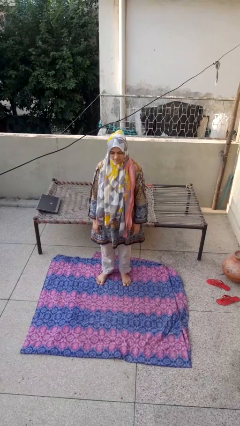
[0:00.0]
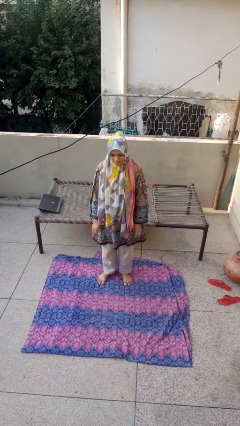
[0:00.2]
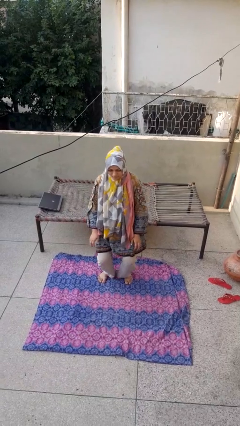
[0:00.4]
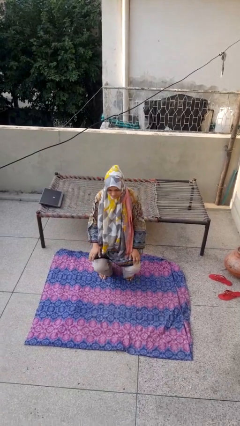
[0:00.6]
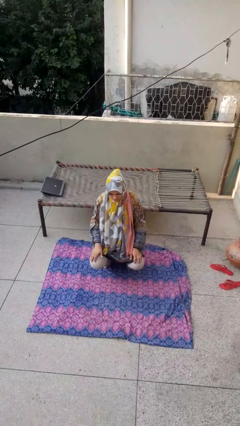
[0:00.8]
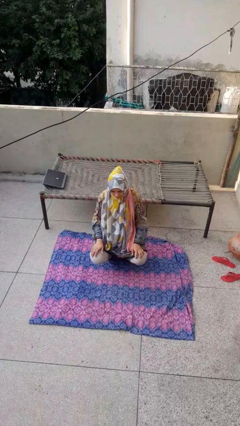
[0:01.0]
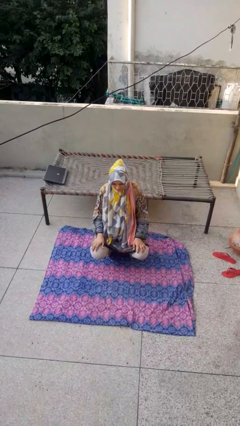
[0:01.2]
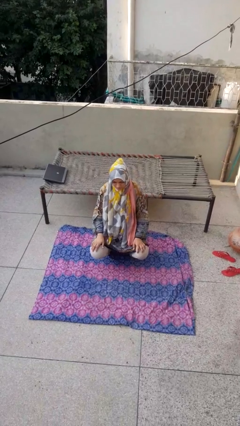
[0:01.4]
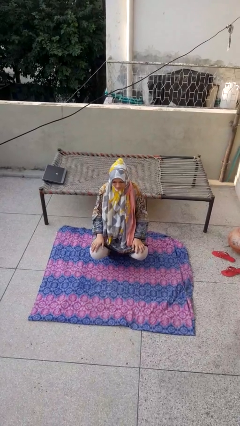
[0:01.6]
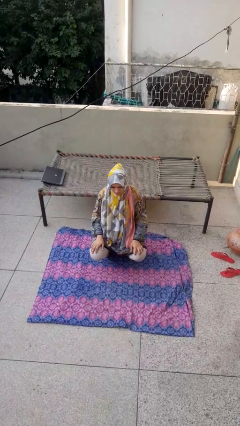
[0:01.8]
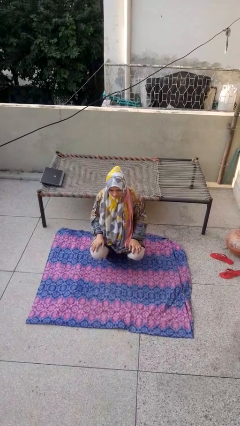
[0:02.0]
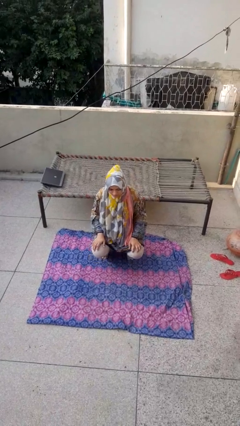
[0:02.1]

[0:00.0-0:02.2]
person squats

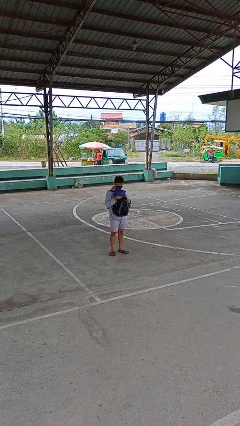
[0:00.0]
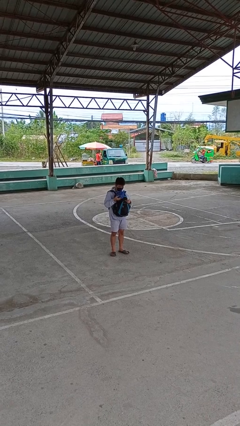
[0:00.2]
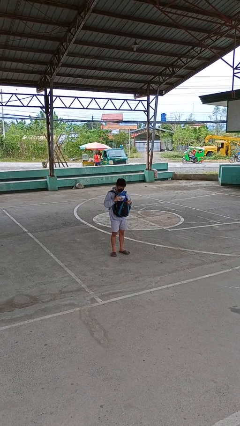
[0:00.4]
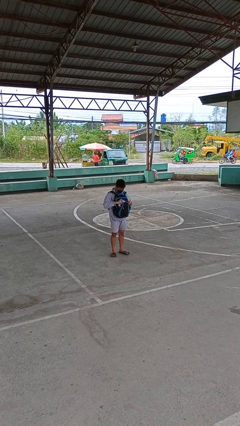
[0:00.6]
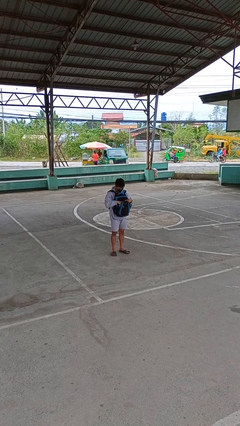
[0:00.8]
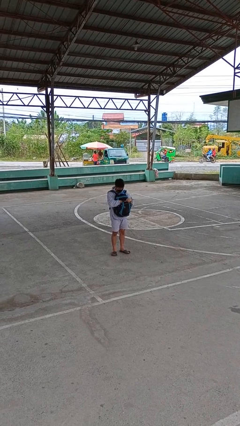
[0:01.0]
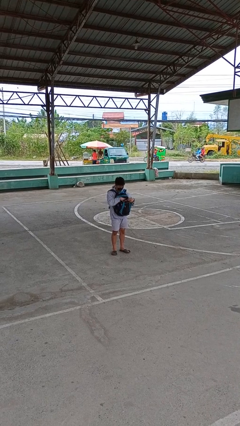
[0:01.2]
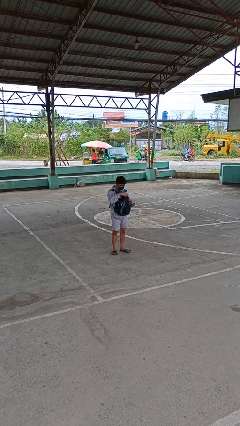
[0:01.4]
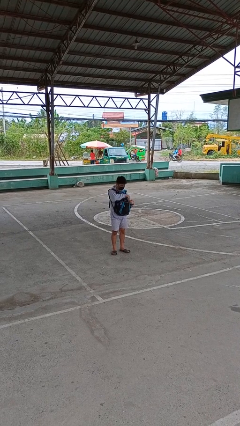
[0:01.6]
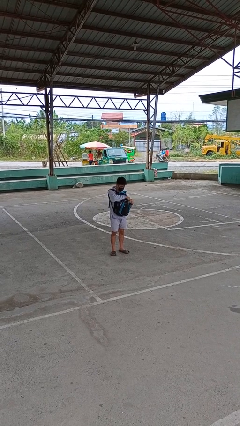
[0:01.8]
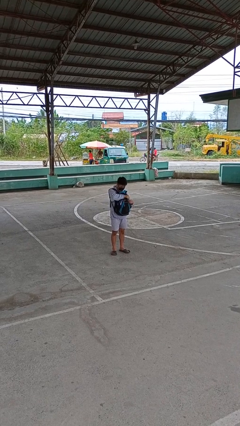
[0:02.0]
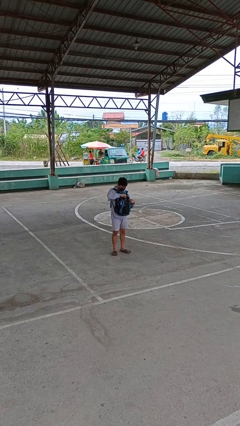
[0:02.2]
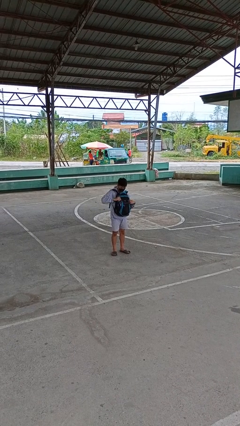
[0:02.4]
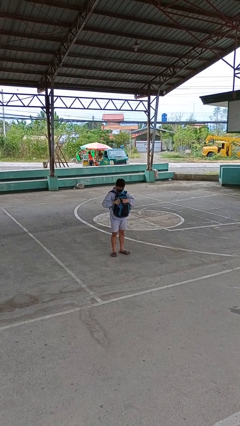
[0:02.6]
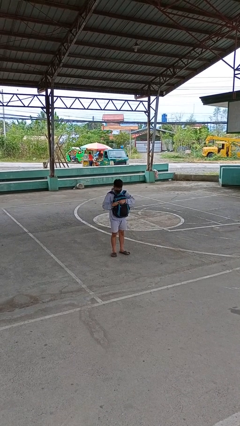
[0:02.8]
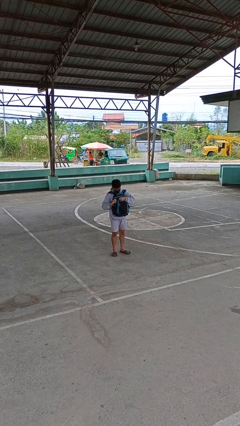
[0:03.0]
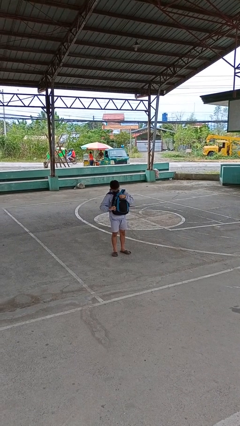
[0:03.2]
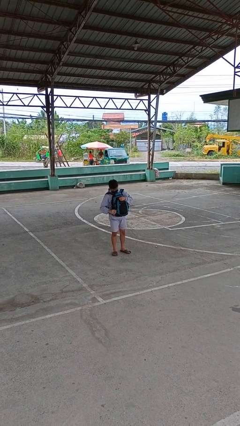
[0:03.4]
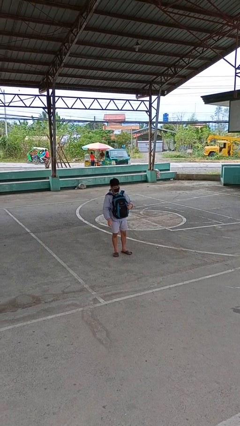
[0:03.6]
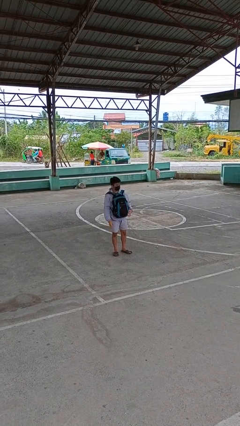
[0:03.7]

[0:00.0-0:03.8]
person puts object into backpack

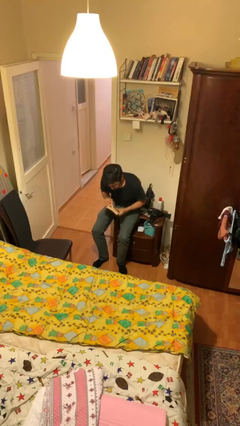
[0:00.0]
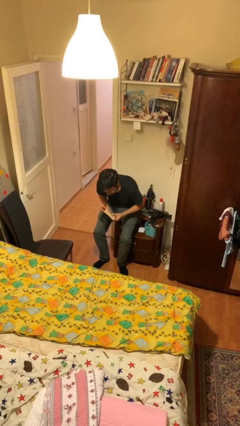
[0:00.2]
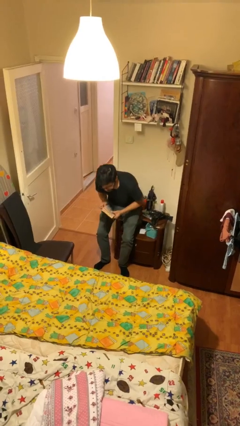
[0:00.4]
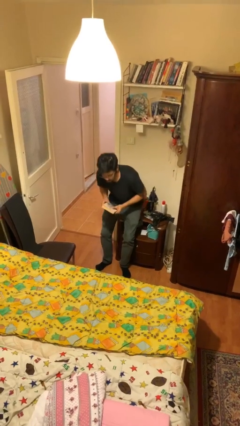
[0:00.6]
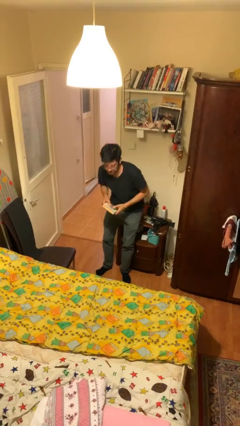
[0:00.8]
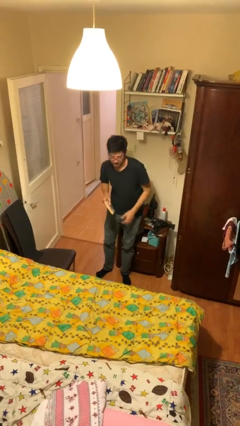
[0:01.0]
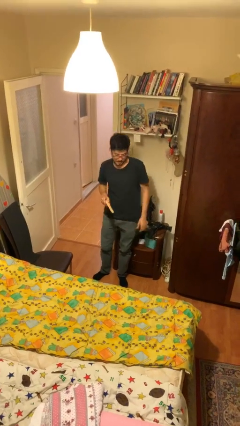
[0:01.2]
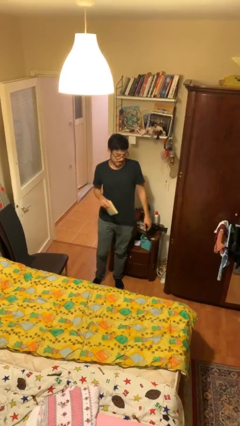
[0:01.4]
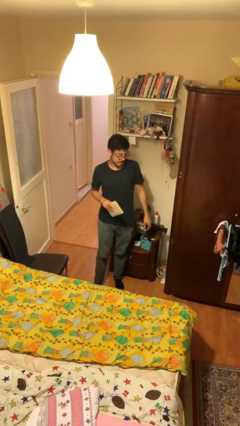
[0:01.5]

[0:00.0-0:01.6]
person stands up

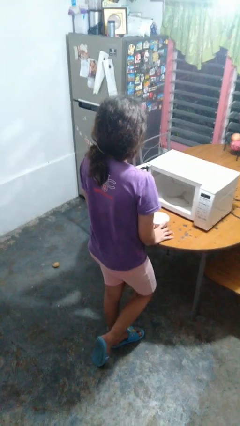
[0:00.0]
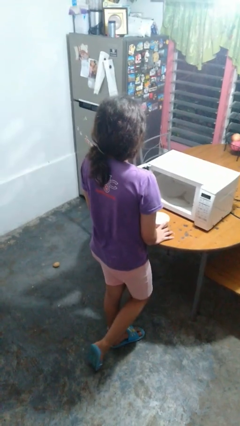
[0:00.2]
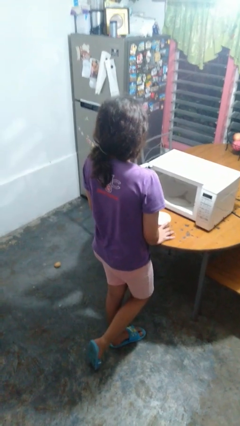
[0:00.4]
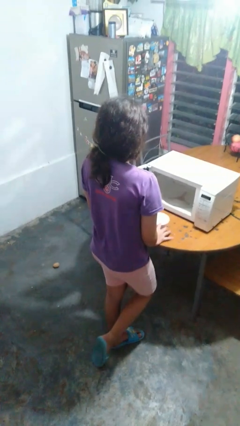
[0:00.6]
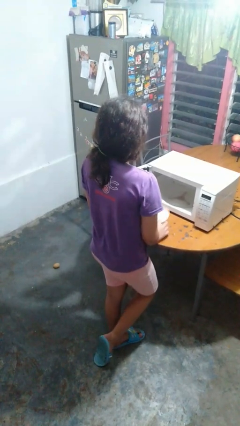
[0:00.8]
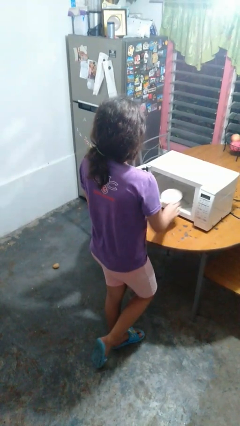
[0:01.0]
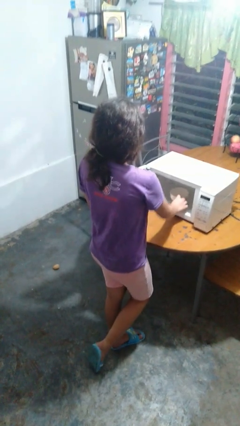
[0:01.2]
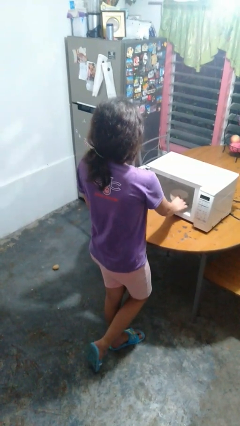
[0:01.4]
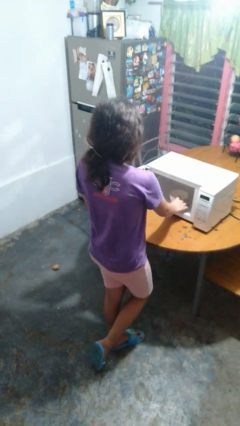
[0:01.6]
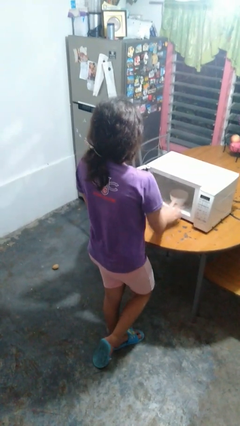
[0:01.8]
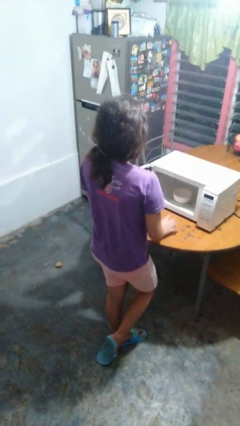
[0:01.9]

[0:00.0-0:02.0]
person puts object into microwave

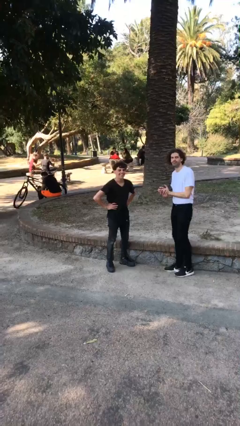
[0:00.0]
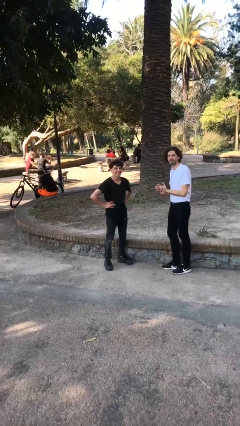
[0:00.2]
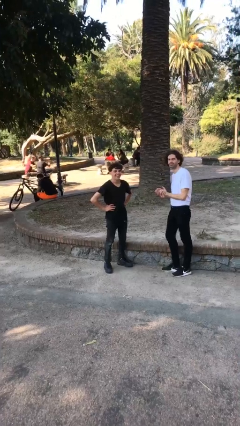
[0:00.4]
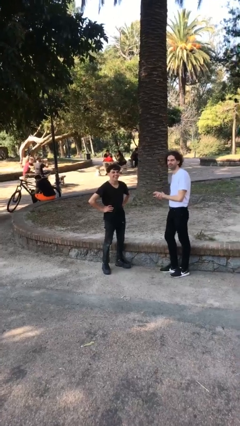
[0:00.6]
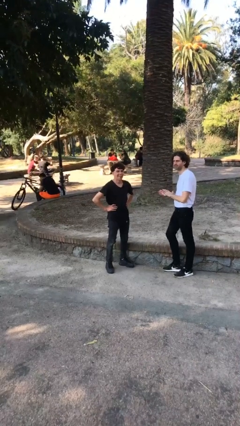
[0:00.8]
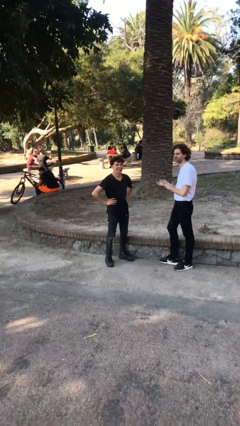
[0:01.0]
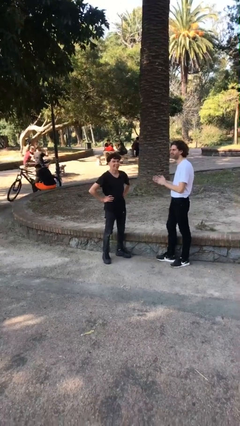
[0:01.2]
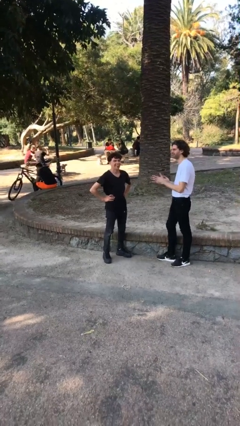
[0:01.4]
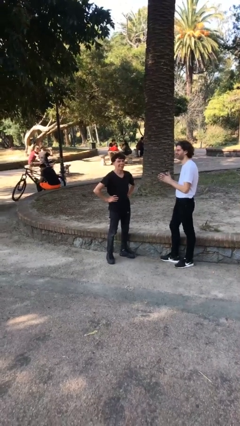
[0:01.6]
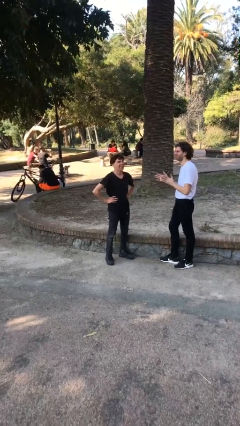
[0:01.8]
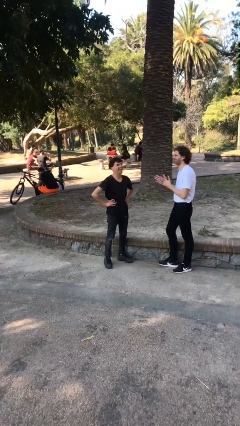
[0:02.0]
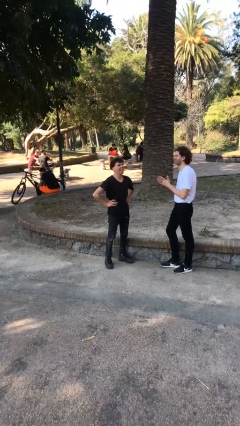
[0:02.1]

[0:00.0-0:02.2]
person laughs with person

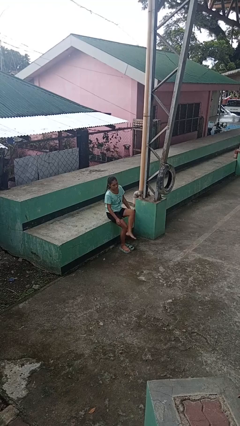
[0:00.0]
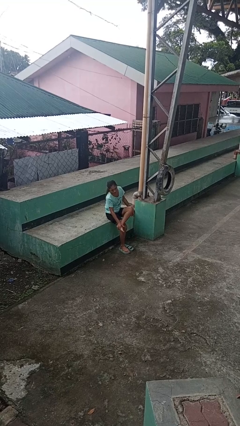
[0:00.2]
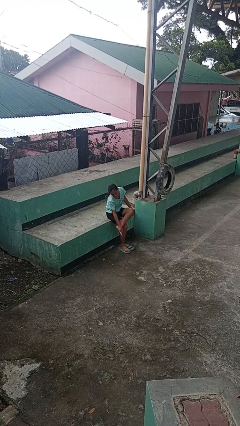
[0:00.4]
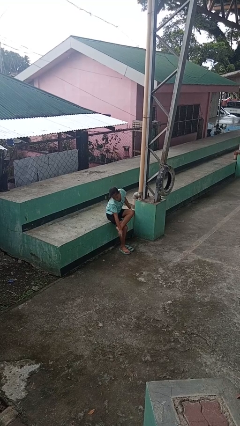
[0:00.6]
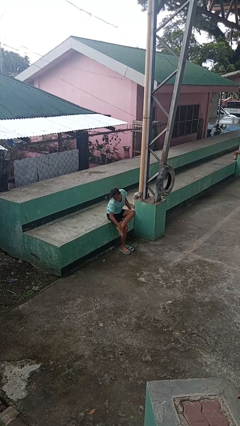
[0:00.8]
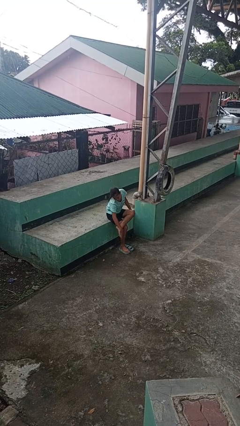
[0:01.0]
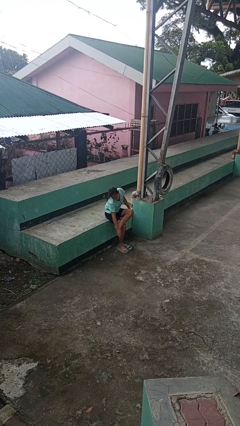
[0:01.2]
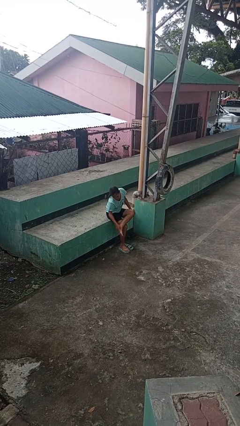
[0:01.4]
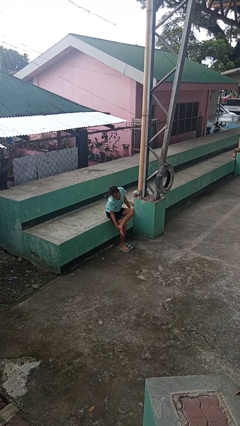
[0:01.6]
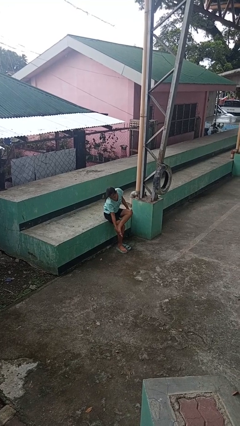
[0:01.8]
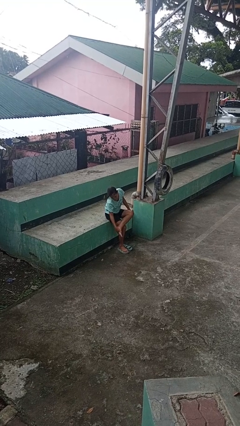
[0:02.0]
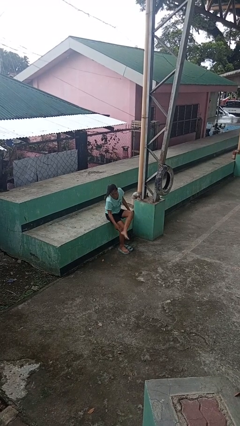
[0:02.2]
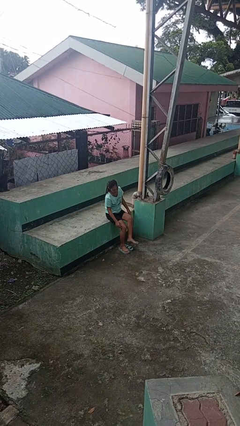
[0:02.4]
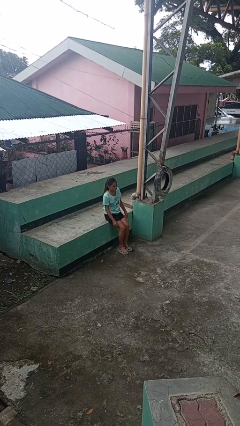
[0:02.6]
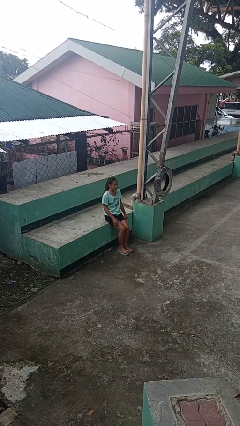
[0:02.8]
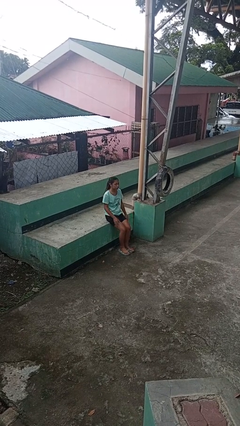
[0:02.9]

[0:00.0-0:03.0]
person rubs foot

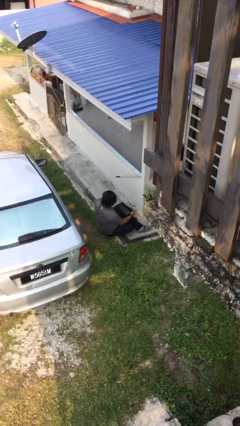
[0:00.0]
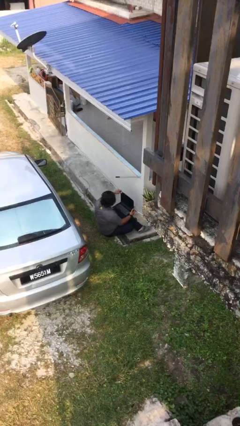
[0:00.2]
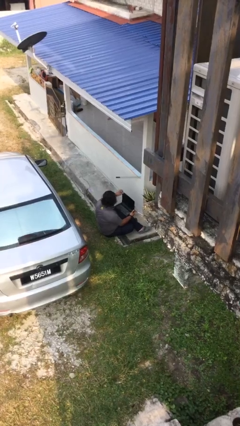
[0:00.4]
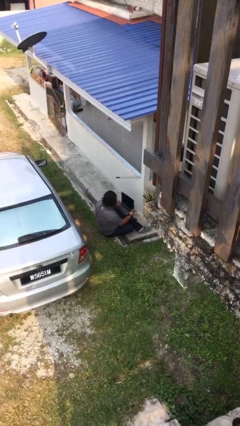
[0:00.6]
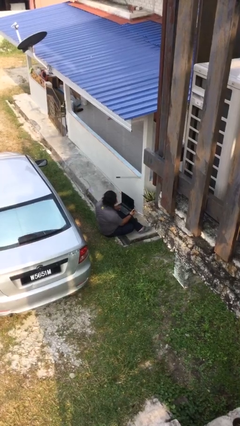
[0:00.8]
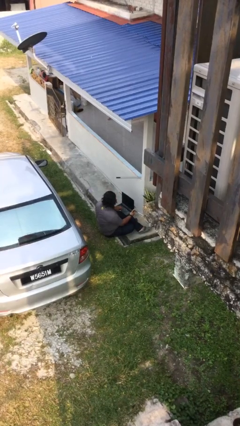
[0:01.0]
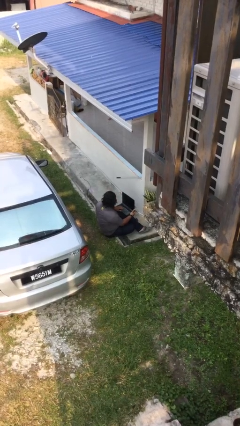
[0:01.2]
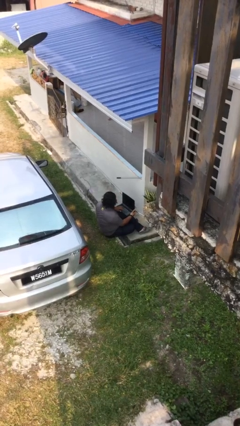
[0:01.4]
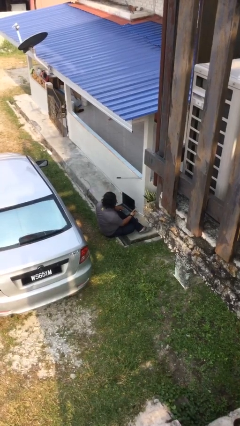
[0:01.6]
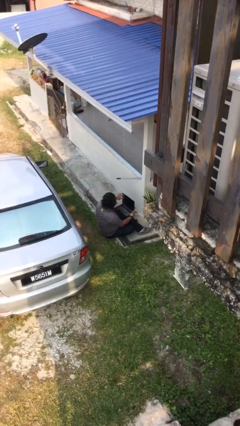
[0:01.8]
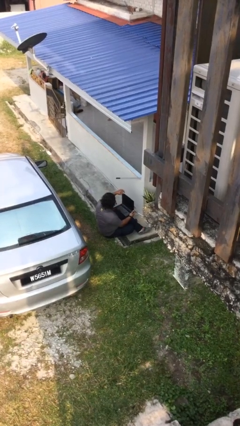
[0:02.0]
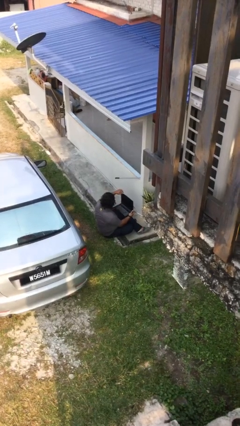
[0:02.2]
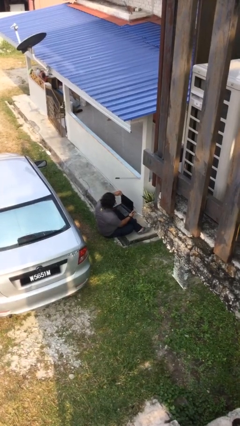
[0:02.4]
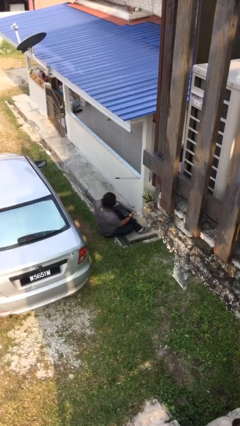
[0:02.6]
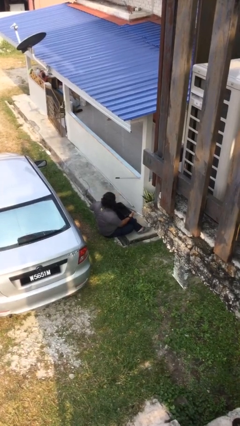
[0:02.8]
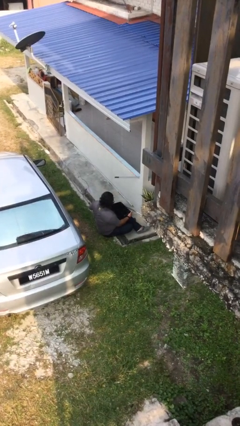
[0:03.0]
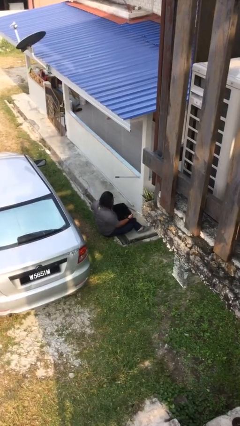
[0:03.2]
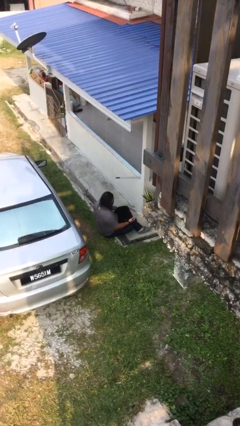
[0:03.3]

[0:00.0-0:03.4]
person interacts with laptop
